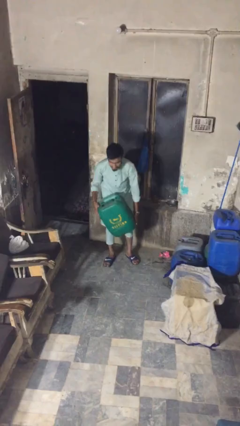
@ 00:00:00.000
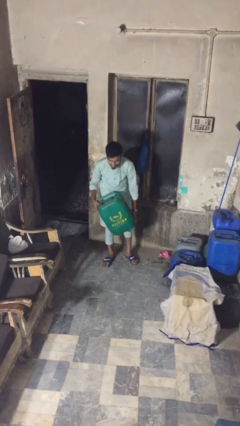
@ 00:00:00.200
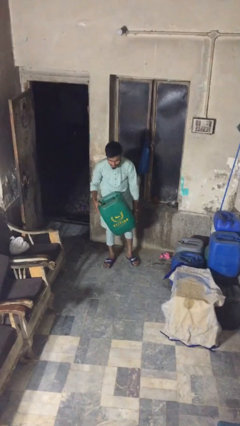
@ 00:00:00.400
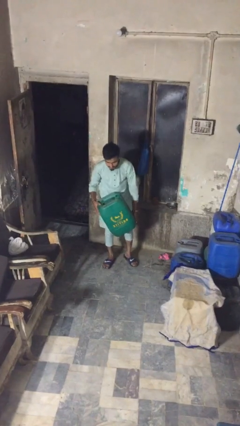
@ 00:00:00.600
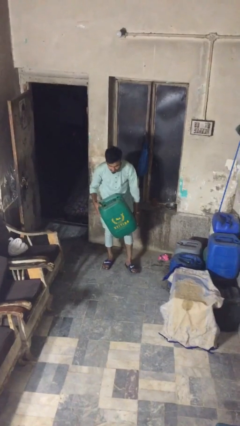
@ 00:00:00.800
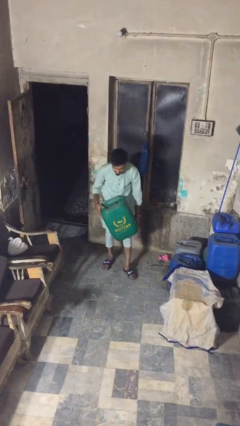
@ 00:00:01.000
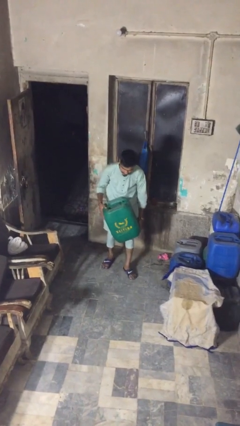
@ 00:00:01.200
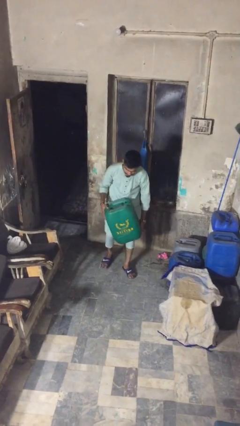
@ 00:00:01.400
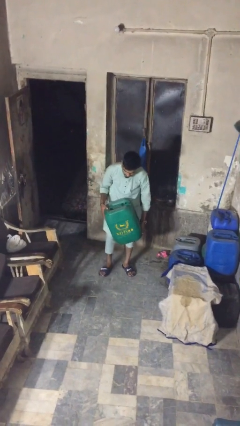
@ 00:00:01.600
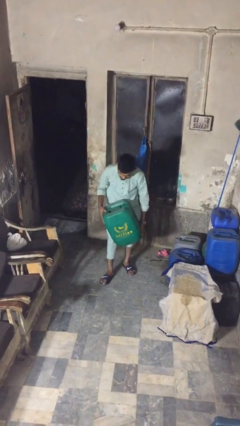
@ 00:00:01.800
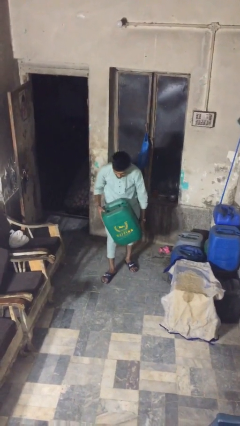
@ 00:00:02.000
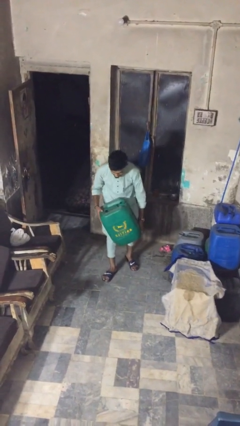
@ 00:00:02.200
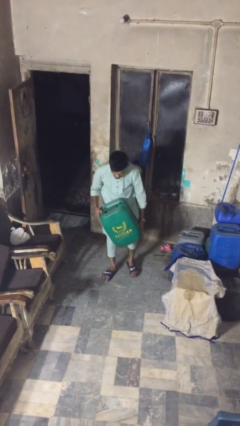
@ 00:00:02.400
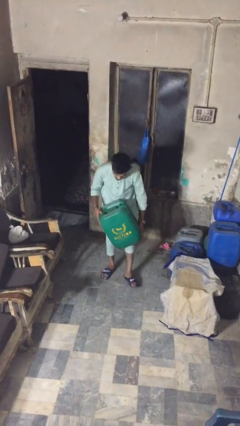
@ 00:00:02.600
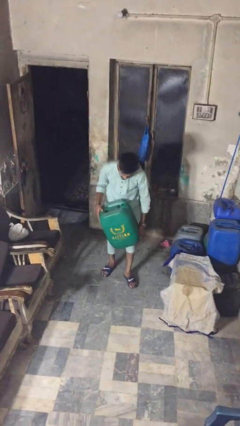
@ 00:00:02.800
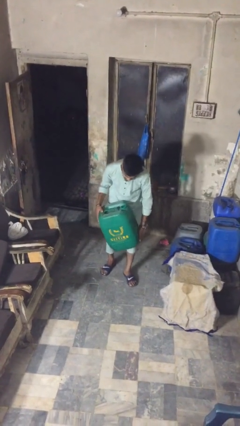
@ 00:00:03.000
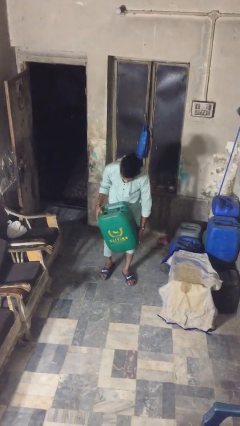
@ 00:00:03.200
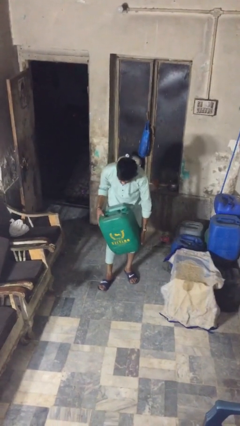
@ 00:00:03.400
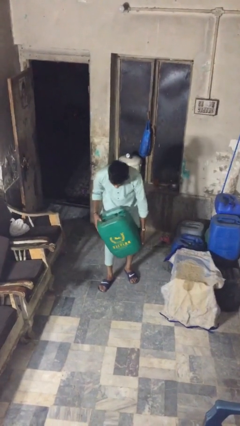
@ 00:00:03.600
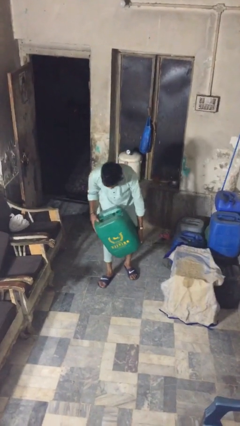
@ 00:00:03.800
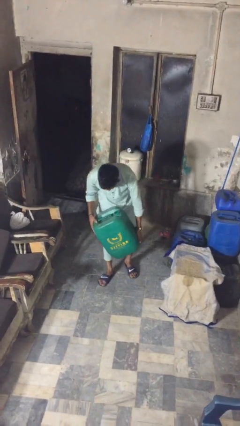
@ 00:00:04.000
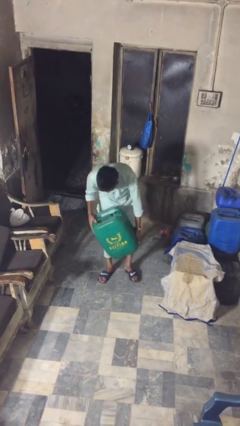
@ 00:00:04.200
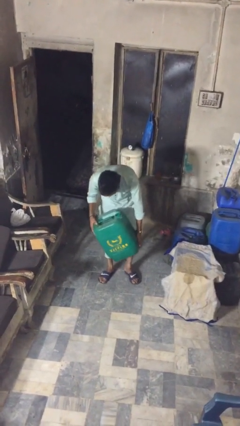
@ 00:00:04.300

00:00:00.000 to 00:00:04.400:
person carries heavy object

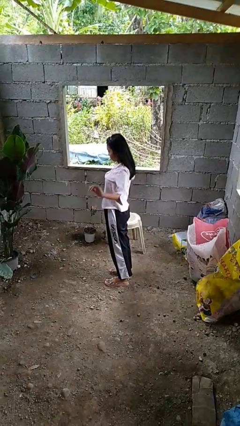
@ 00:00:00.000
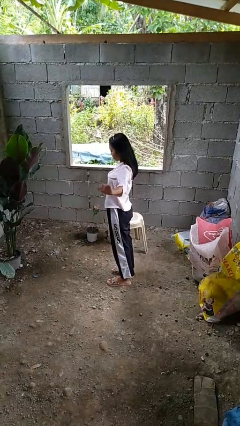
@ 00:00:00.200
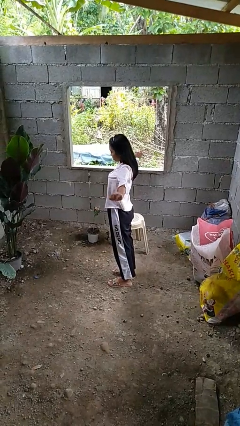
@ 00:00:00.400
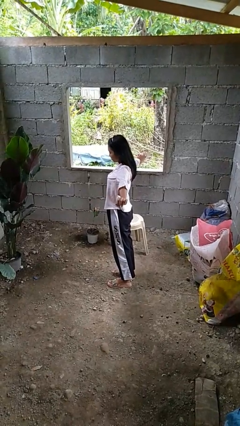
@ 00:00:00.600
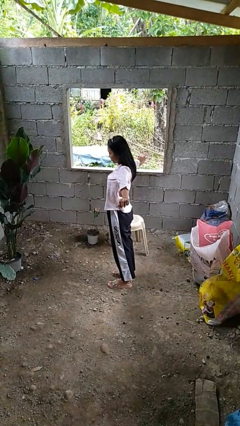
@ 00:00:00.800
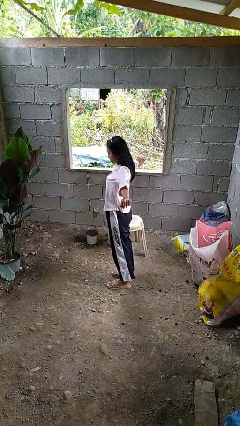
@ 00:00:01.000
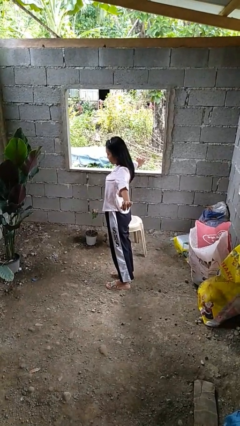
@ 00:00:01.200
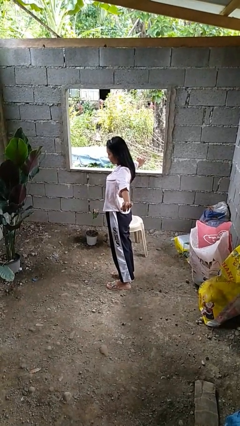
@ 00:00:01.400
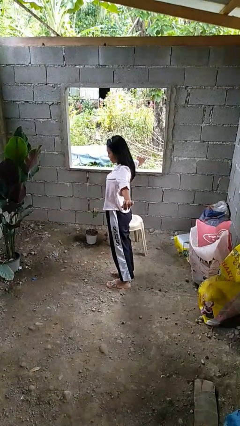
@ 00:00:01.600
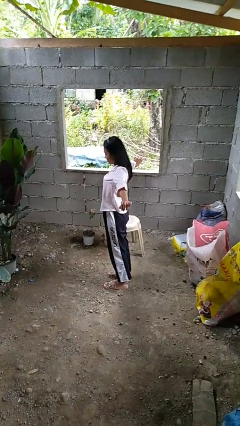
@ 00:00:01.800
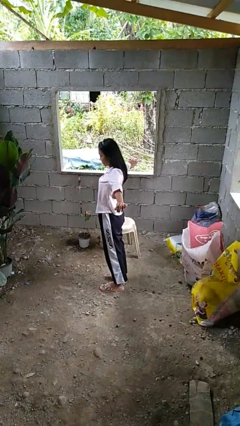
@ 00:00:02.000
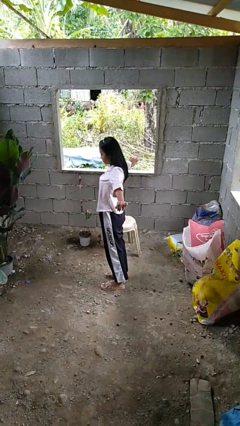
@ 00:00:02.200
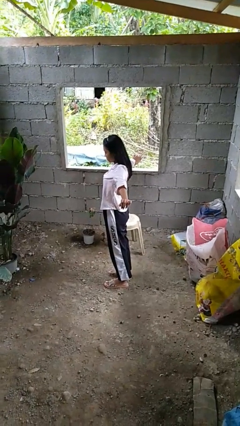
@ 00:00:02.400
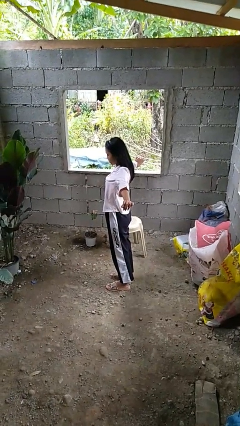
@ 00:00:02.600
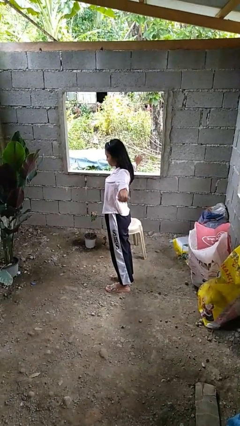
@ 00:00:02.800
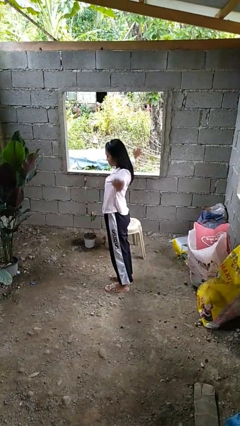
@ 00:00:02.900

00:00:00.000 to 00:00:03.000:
person stretches arms to side

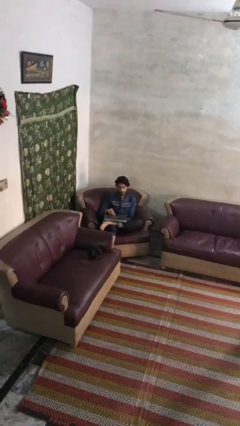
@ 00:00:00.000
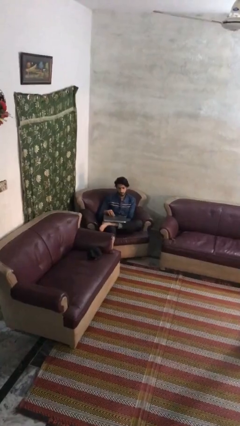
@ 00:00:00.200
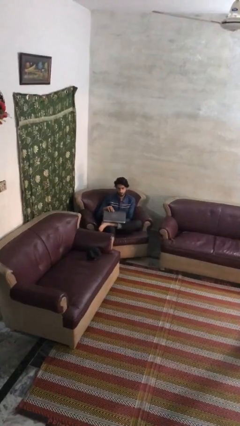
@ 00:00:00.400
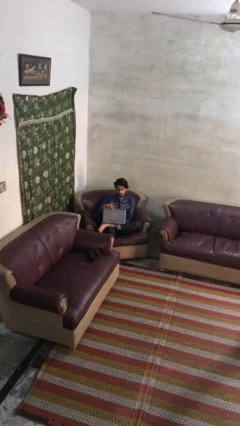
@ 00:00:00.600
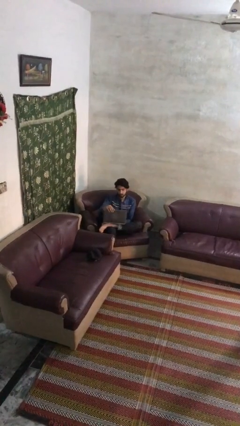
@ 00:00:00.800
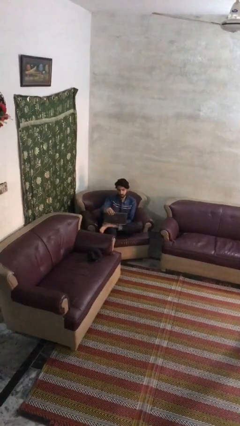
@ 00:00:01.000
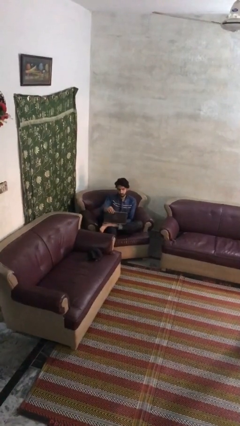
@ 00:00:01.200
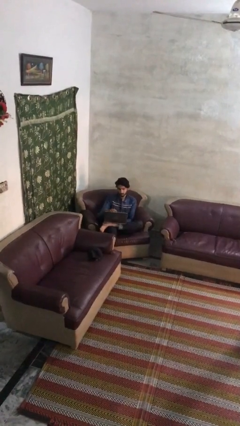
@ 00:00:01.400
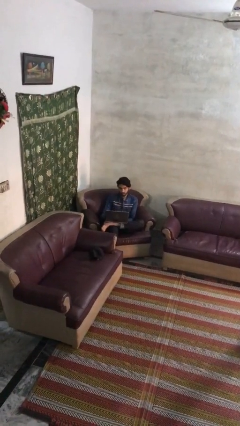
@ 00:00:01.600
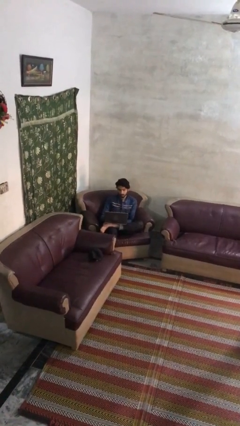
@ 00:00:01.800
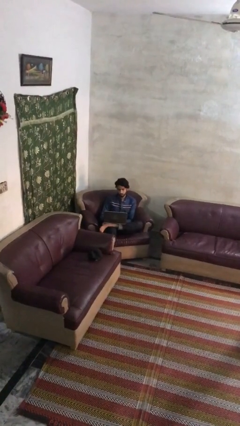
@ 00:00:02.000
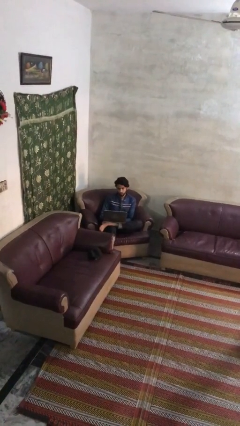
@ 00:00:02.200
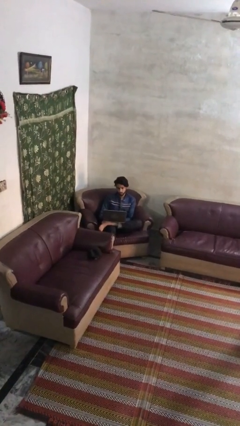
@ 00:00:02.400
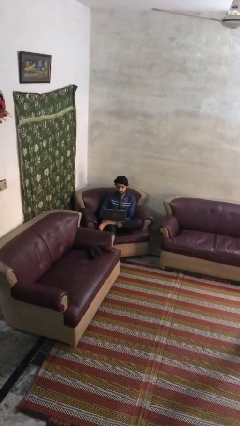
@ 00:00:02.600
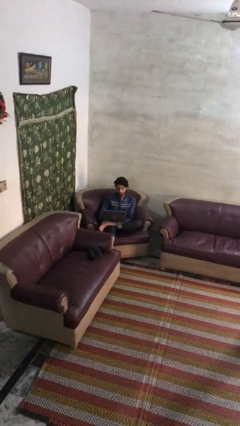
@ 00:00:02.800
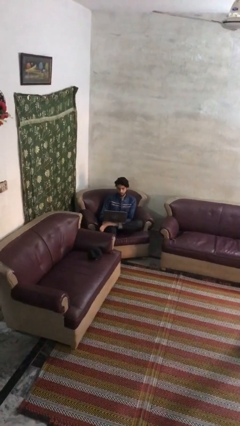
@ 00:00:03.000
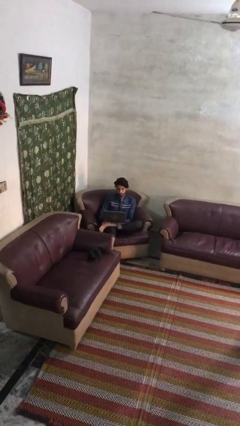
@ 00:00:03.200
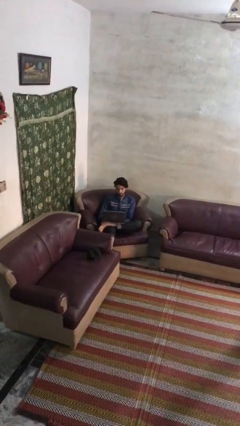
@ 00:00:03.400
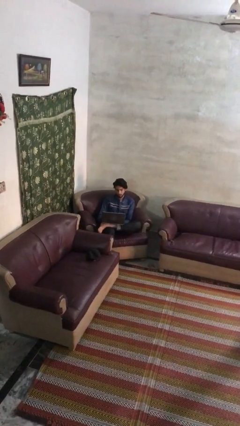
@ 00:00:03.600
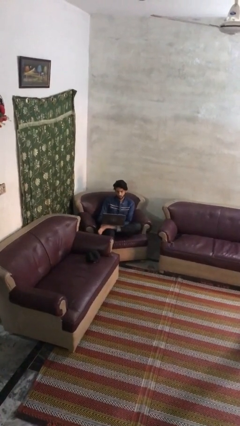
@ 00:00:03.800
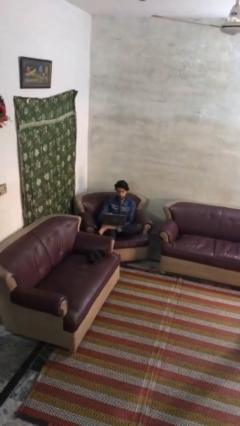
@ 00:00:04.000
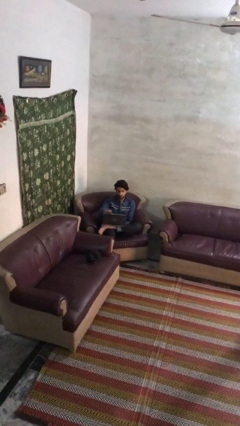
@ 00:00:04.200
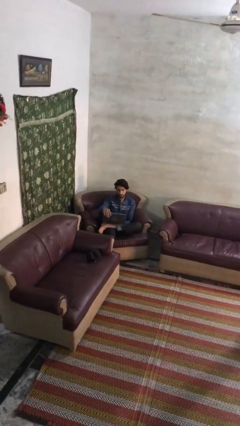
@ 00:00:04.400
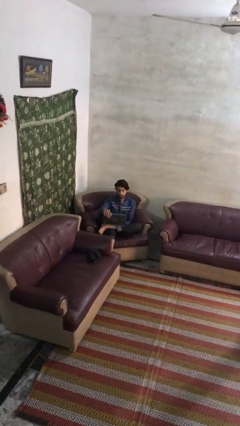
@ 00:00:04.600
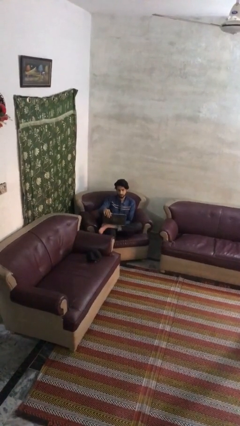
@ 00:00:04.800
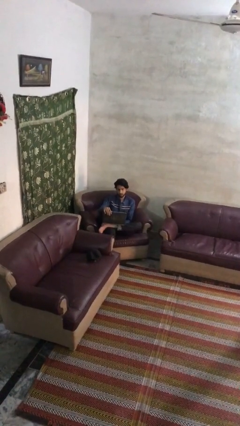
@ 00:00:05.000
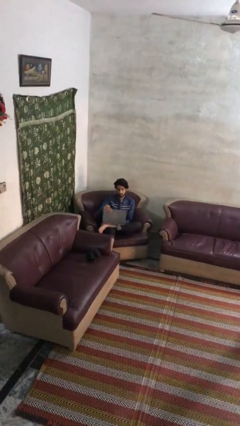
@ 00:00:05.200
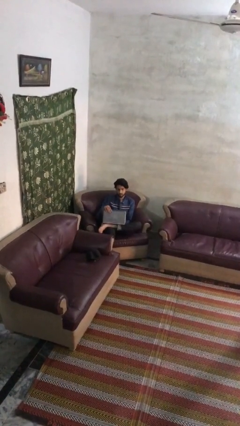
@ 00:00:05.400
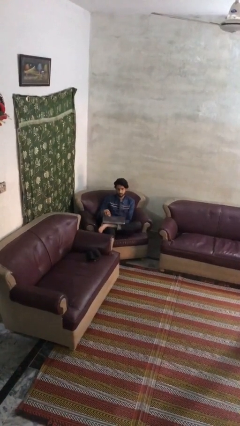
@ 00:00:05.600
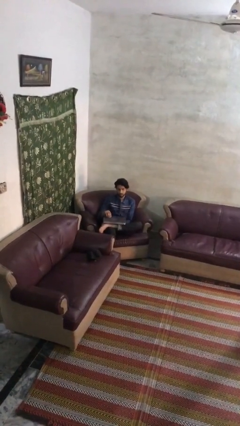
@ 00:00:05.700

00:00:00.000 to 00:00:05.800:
person interacts with laptop

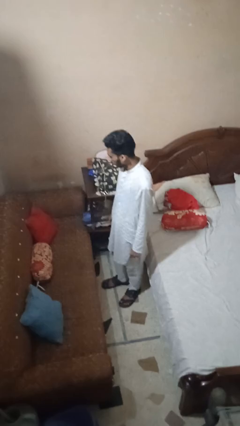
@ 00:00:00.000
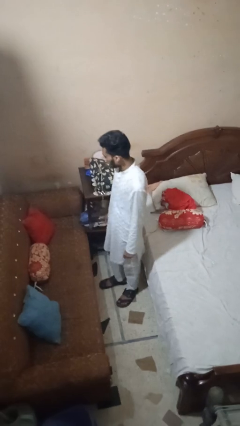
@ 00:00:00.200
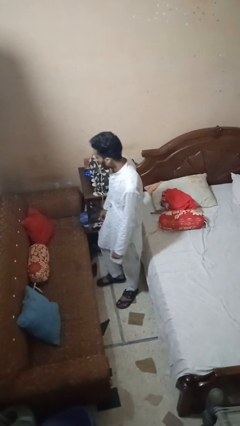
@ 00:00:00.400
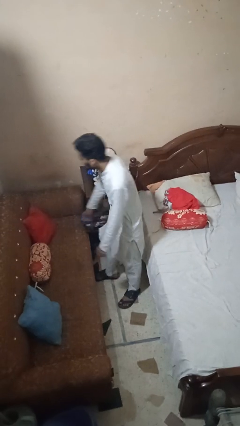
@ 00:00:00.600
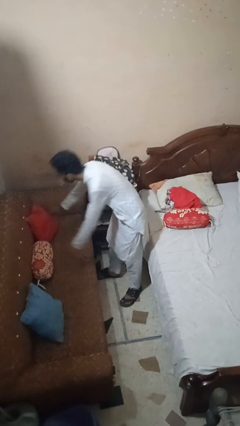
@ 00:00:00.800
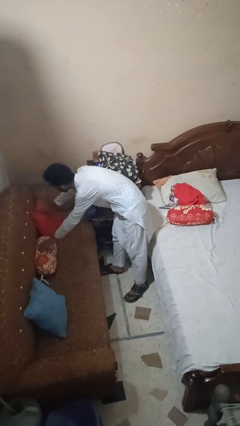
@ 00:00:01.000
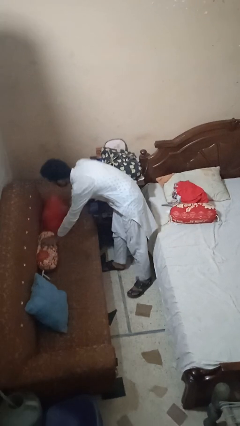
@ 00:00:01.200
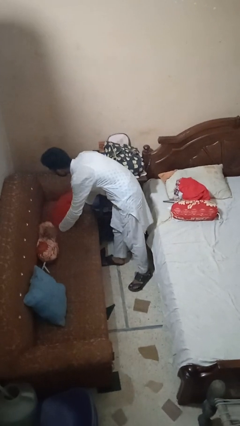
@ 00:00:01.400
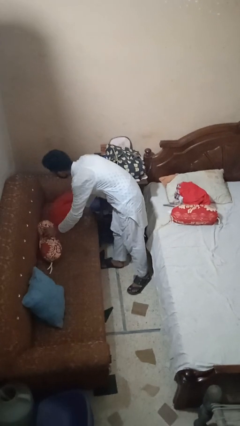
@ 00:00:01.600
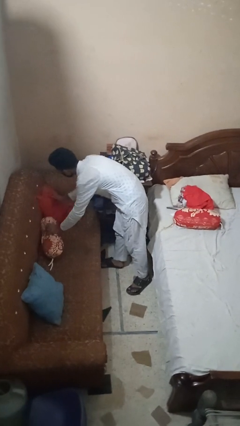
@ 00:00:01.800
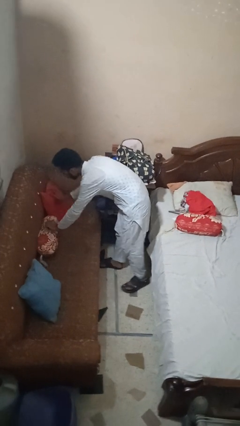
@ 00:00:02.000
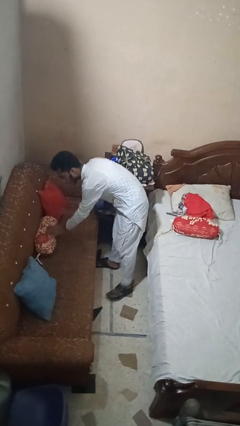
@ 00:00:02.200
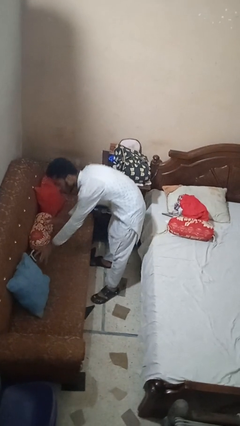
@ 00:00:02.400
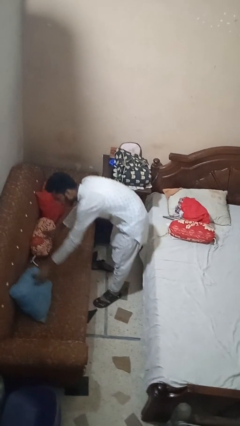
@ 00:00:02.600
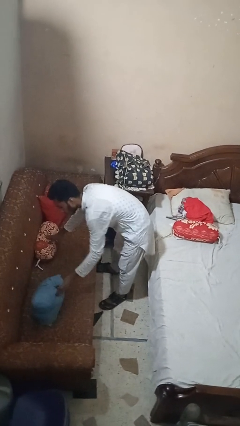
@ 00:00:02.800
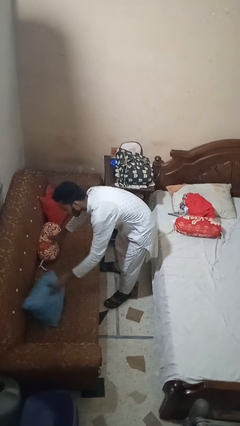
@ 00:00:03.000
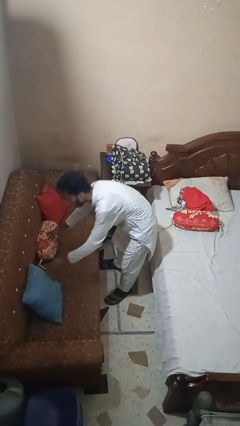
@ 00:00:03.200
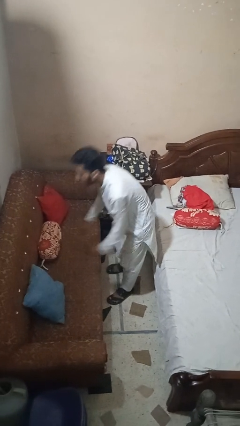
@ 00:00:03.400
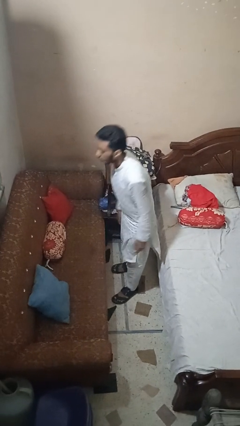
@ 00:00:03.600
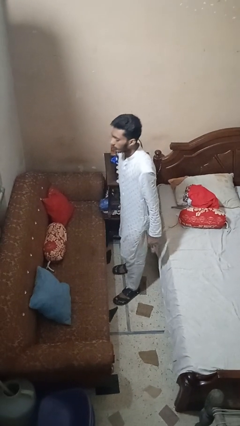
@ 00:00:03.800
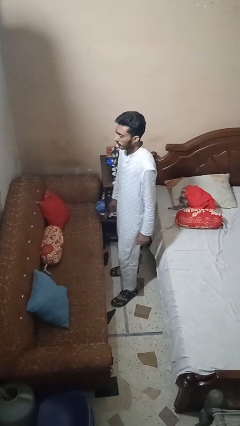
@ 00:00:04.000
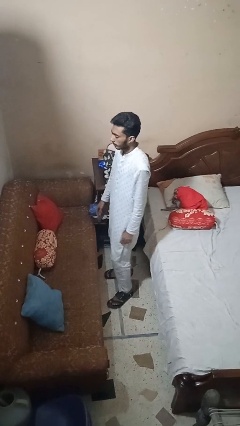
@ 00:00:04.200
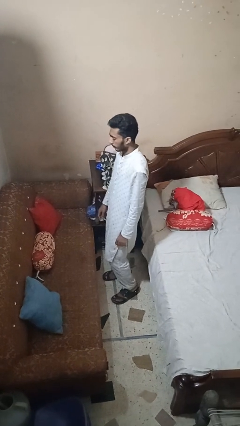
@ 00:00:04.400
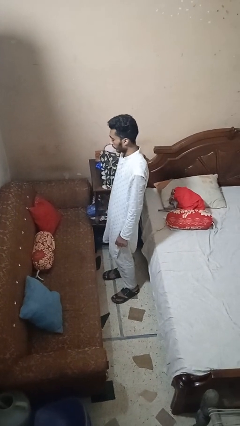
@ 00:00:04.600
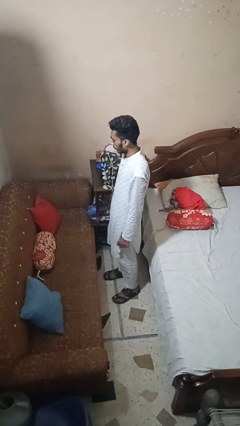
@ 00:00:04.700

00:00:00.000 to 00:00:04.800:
person searches in couch
